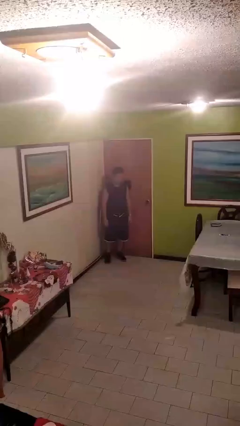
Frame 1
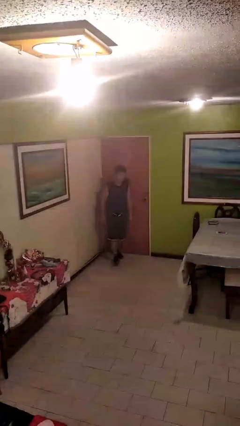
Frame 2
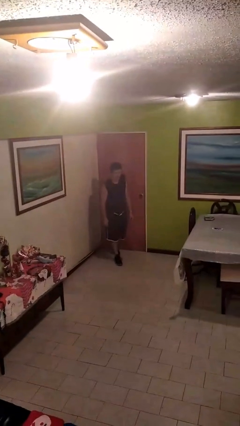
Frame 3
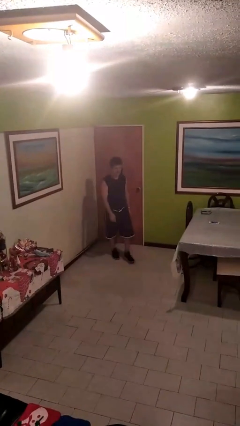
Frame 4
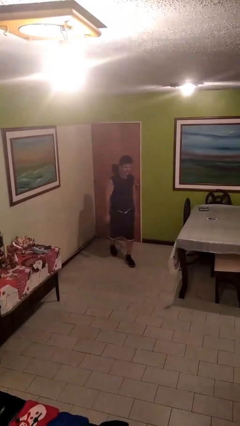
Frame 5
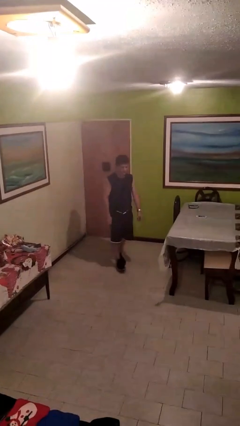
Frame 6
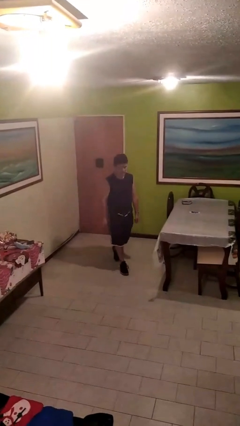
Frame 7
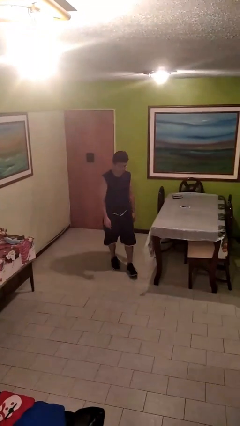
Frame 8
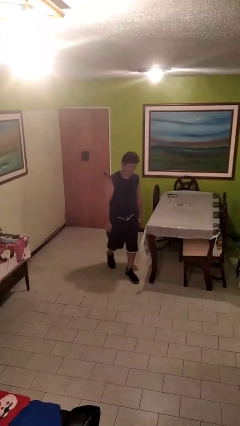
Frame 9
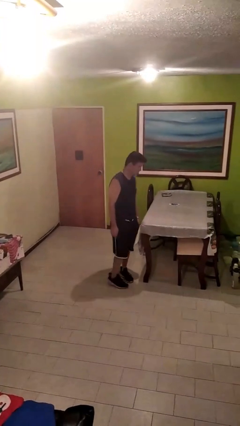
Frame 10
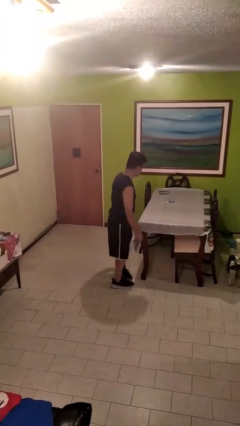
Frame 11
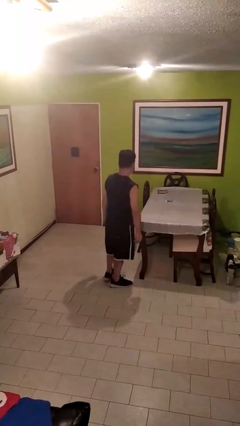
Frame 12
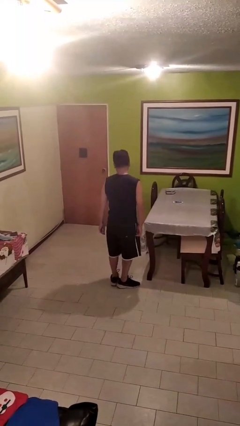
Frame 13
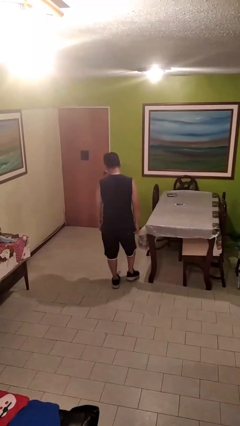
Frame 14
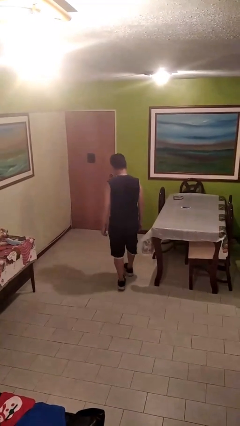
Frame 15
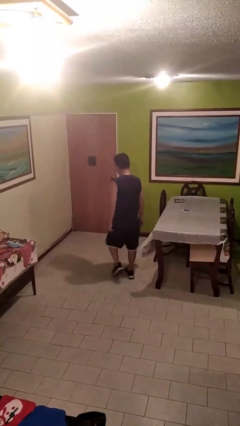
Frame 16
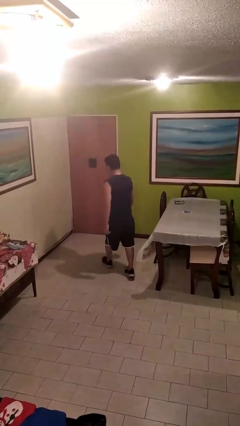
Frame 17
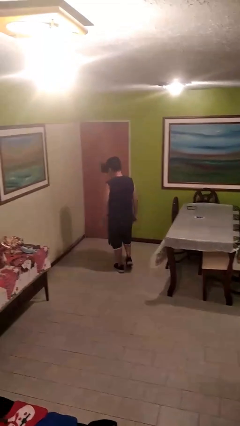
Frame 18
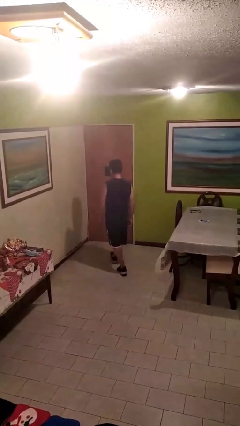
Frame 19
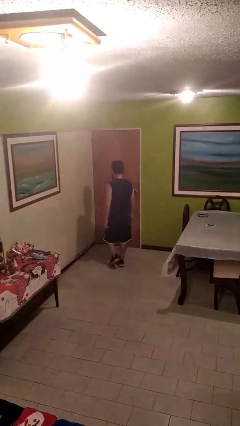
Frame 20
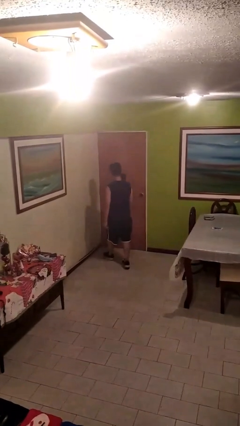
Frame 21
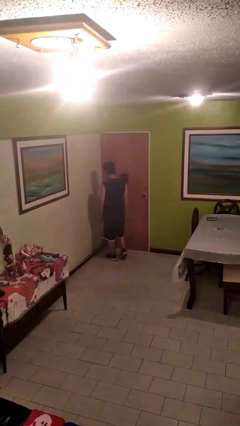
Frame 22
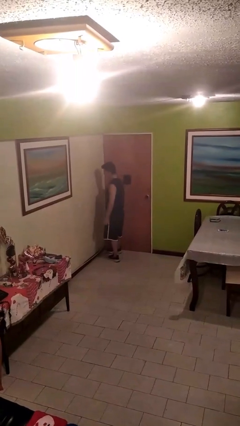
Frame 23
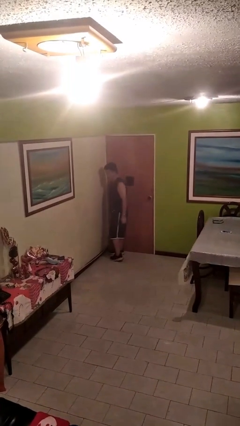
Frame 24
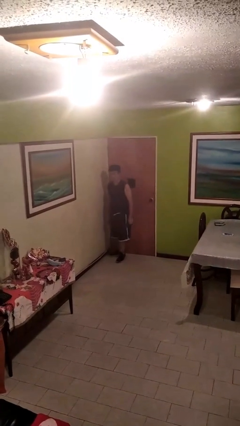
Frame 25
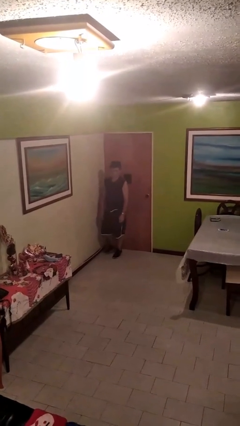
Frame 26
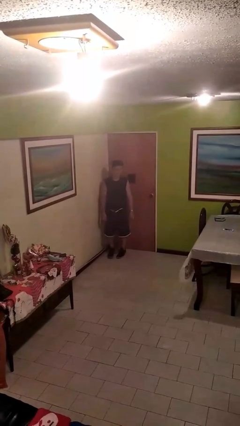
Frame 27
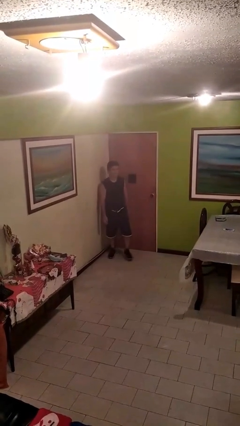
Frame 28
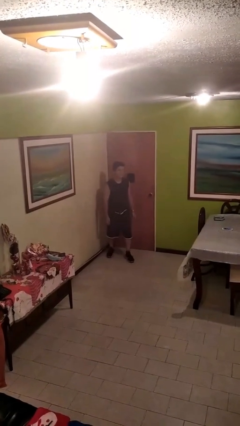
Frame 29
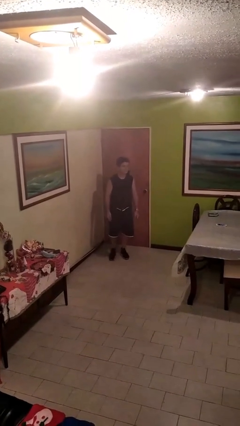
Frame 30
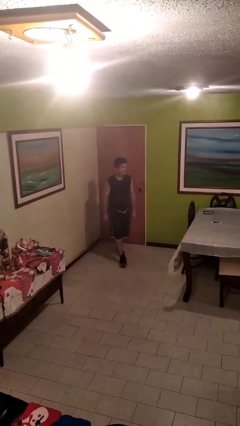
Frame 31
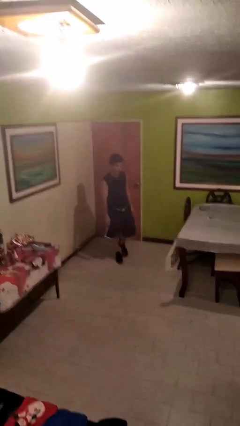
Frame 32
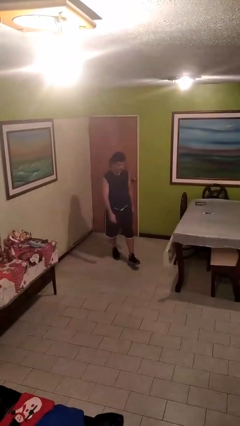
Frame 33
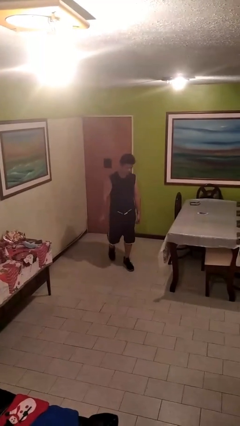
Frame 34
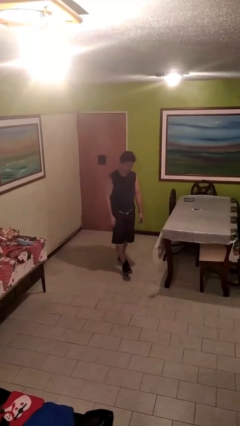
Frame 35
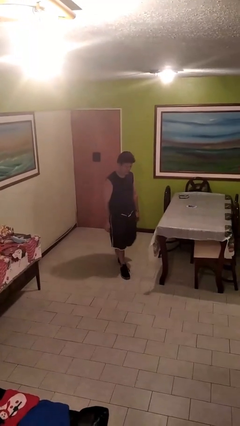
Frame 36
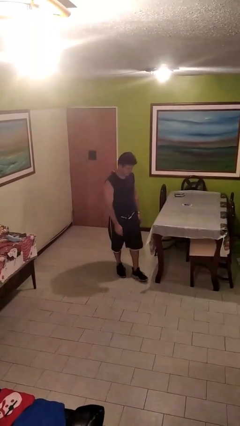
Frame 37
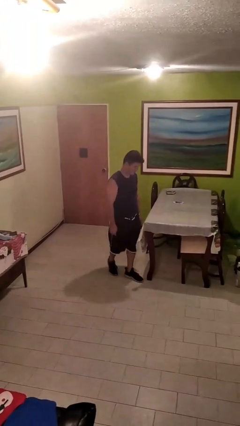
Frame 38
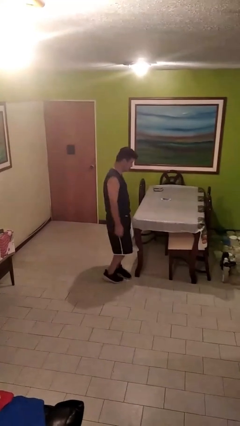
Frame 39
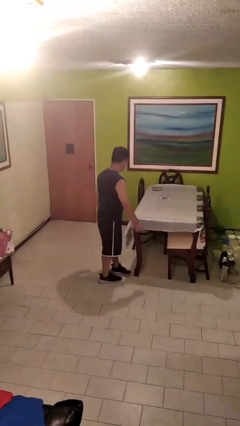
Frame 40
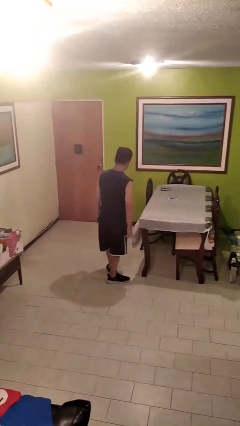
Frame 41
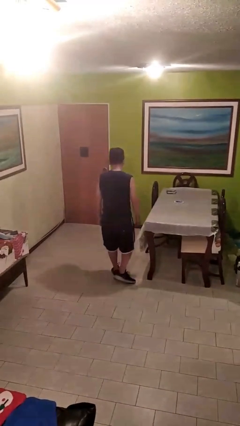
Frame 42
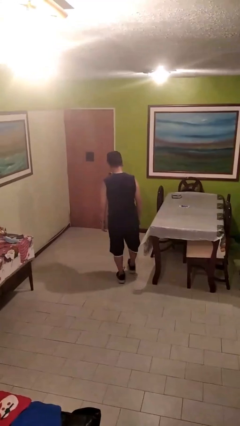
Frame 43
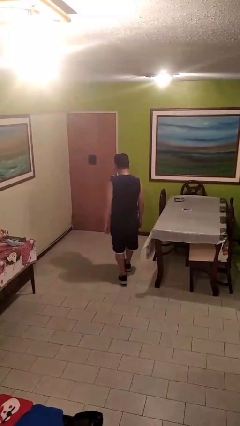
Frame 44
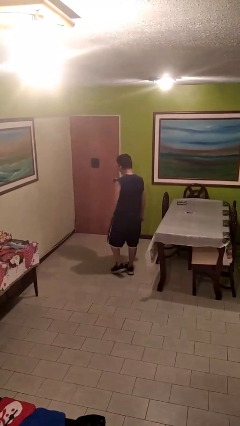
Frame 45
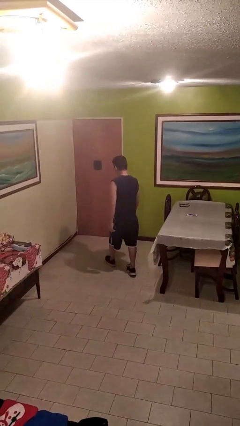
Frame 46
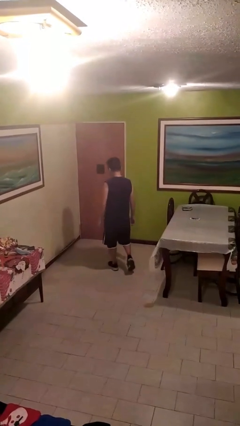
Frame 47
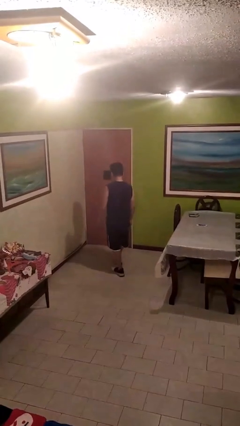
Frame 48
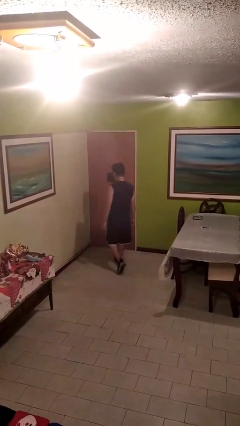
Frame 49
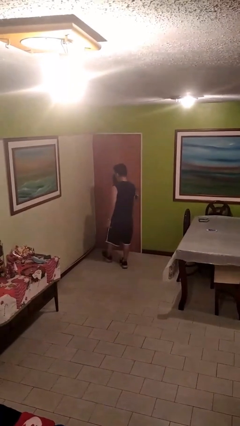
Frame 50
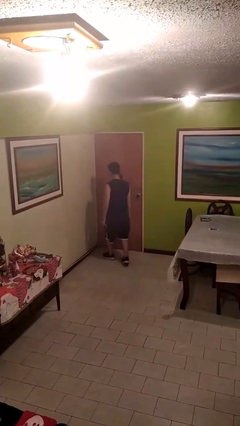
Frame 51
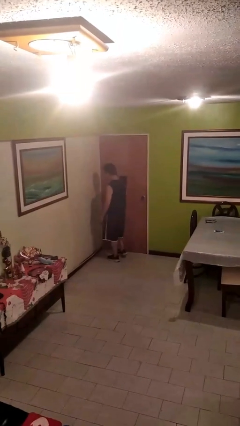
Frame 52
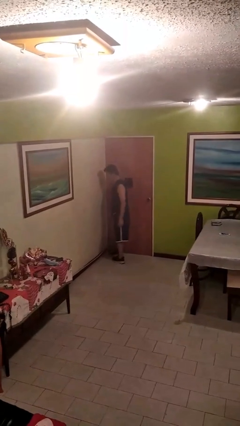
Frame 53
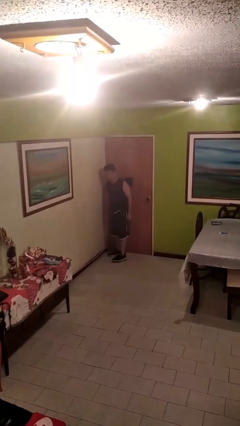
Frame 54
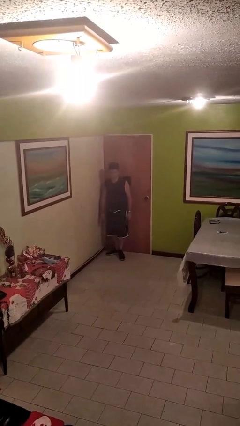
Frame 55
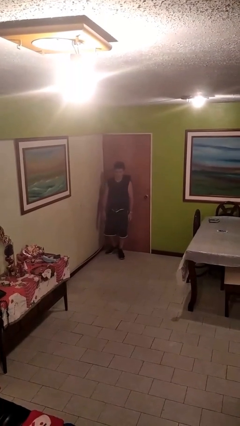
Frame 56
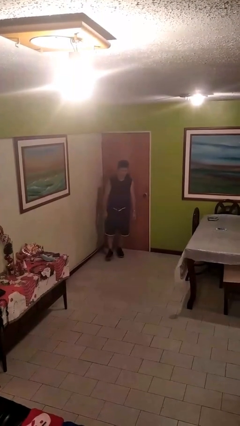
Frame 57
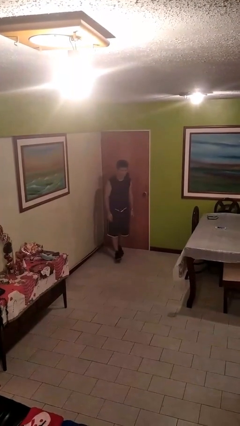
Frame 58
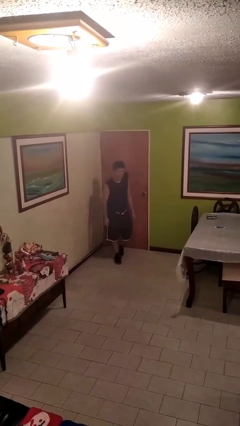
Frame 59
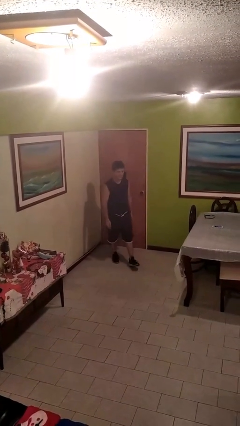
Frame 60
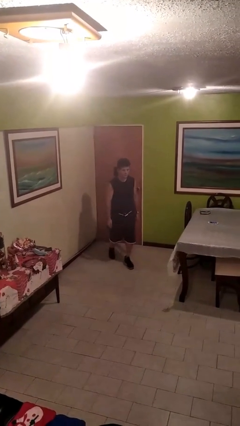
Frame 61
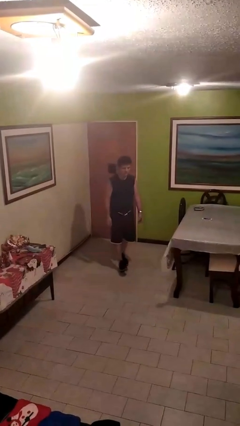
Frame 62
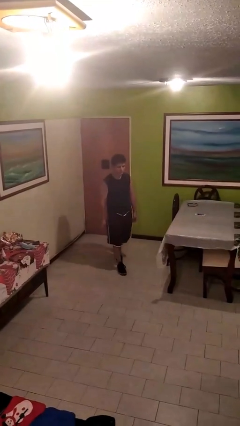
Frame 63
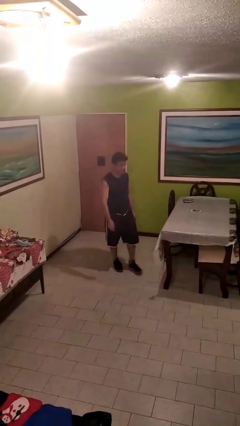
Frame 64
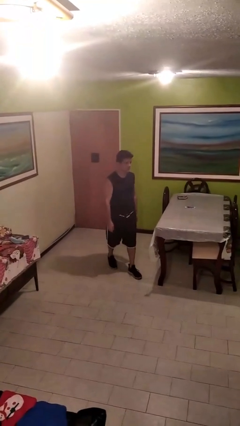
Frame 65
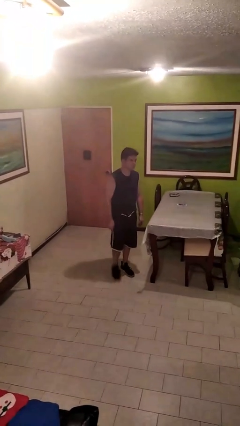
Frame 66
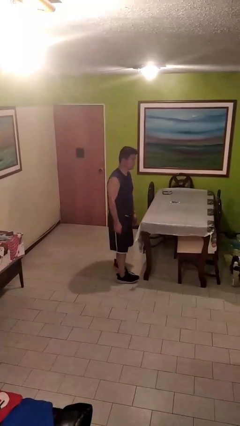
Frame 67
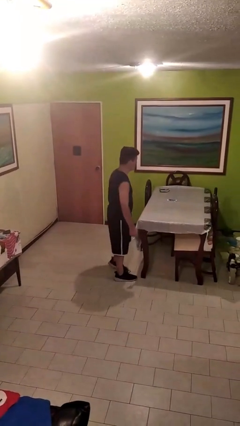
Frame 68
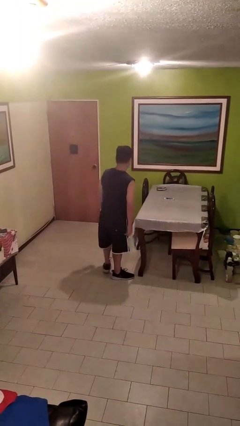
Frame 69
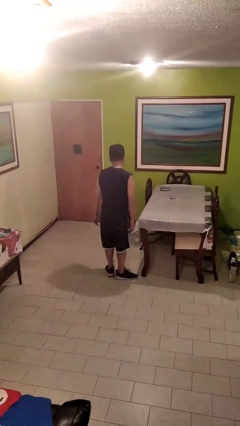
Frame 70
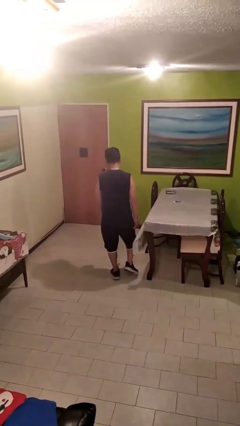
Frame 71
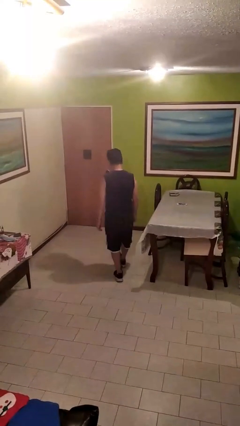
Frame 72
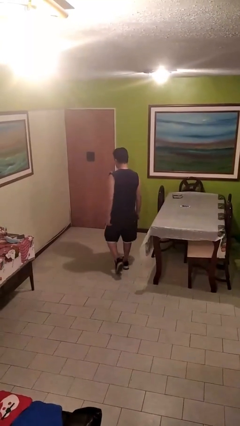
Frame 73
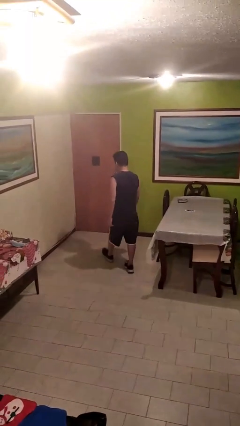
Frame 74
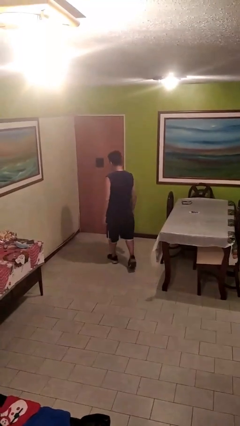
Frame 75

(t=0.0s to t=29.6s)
person walks

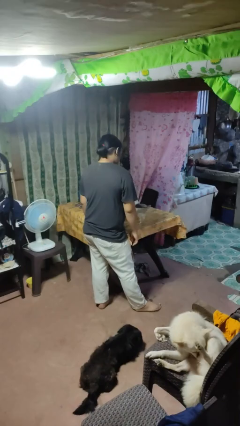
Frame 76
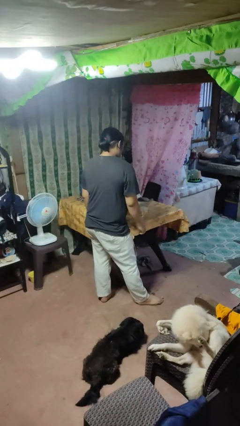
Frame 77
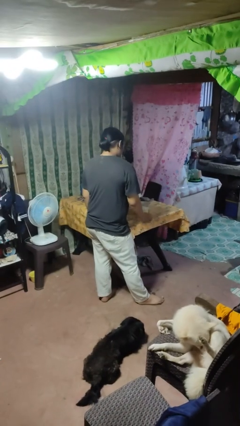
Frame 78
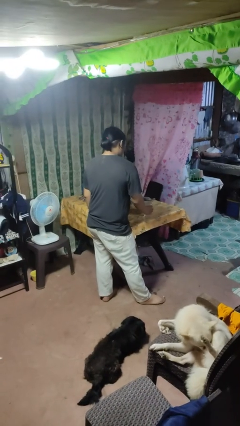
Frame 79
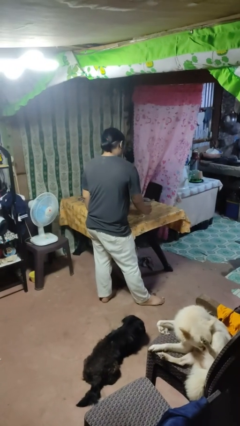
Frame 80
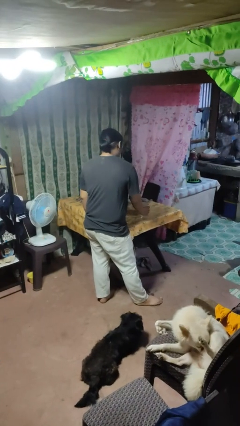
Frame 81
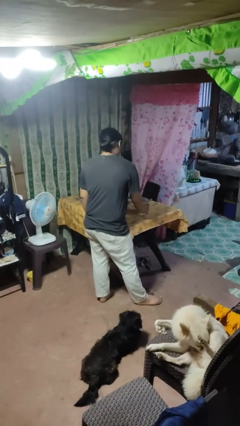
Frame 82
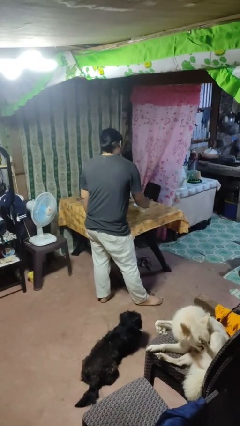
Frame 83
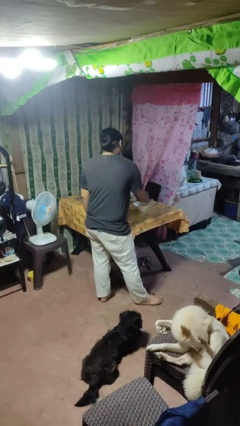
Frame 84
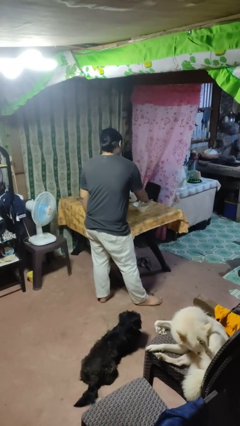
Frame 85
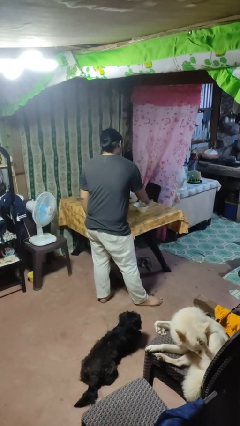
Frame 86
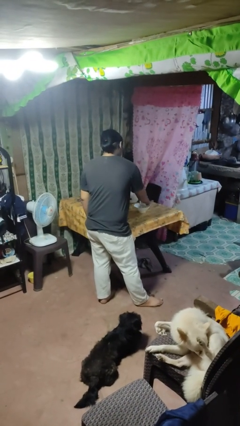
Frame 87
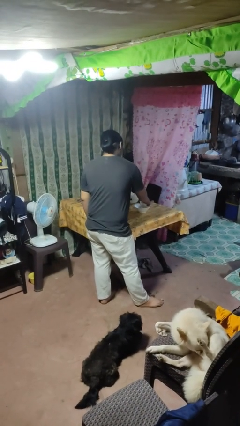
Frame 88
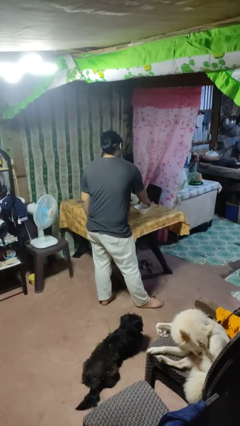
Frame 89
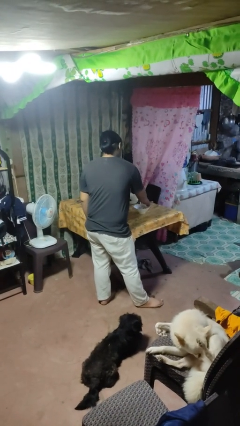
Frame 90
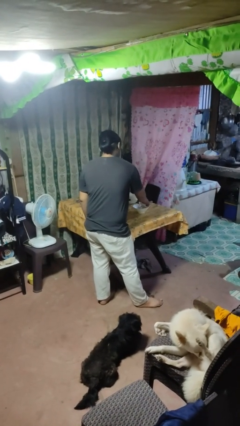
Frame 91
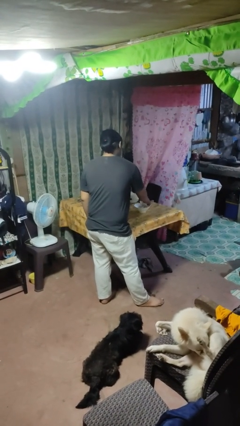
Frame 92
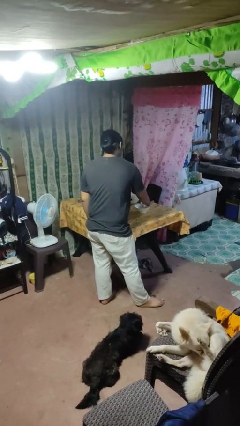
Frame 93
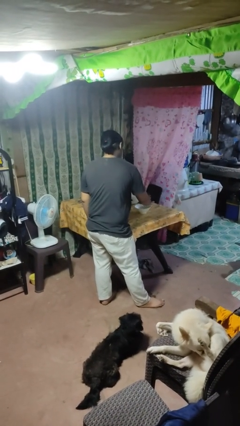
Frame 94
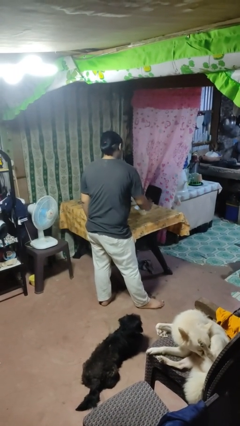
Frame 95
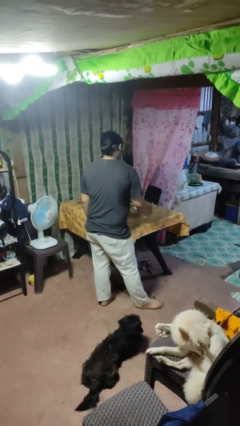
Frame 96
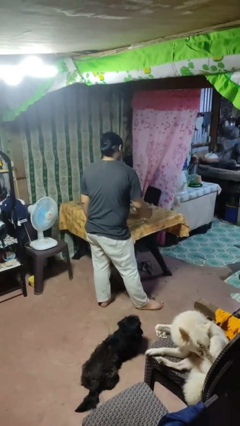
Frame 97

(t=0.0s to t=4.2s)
person pours into bowl
